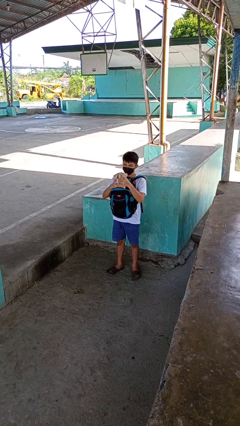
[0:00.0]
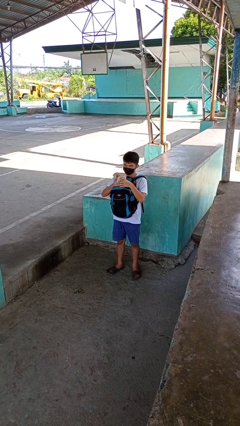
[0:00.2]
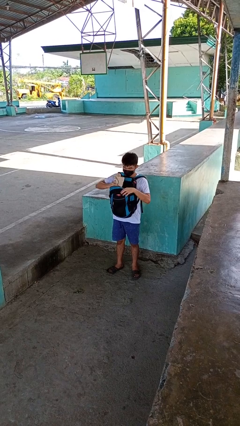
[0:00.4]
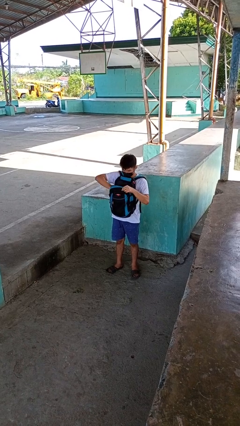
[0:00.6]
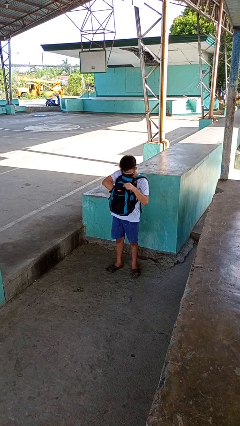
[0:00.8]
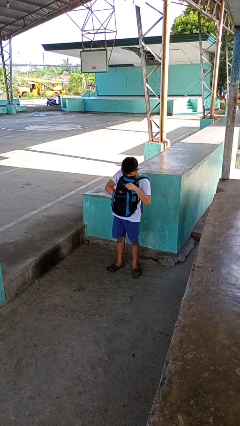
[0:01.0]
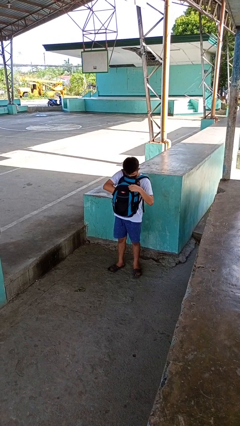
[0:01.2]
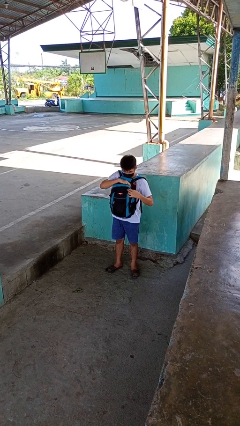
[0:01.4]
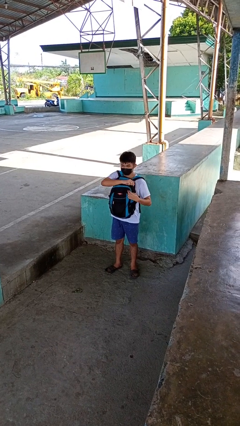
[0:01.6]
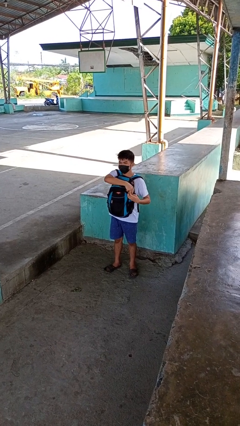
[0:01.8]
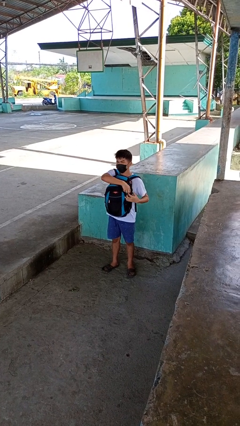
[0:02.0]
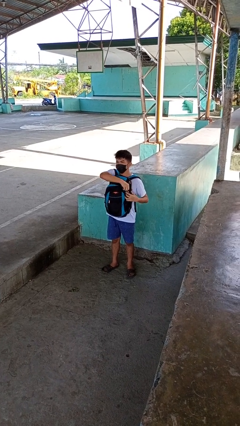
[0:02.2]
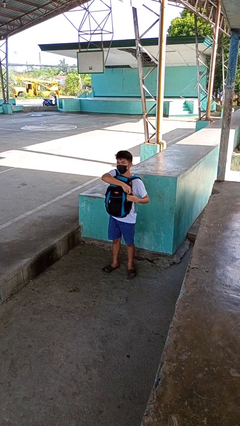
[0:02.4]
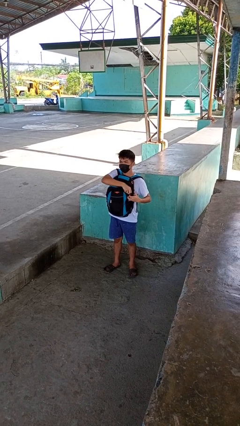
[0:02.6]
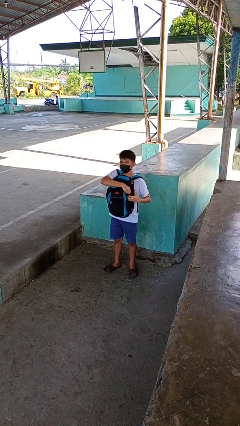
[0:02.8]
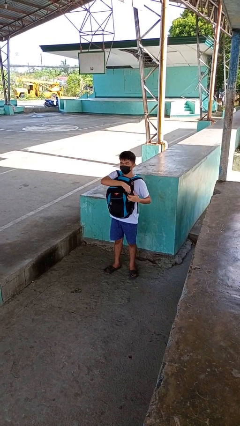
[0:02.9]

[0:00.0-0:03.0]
person puts object into backpack

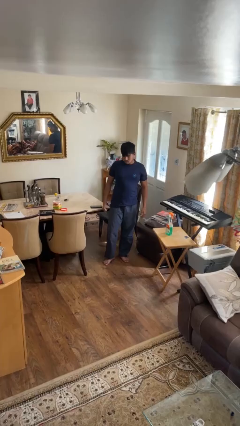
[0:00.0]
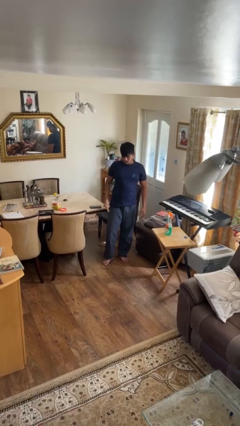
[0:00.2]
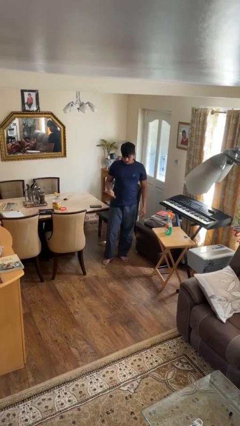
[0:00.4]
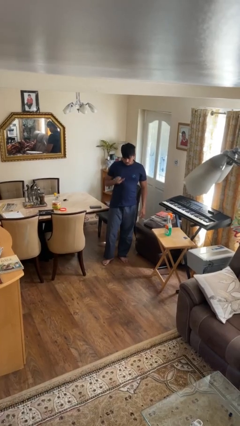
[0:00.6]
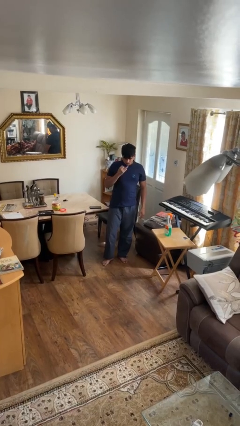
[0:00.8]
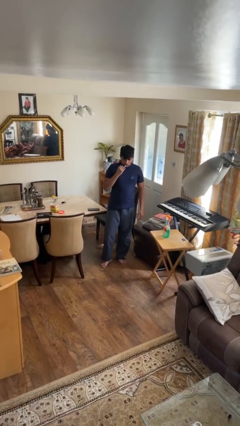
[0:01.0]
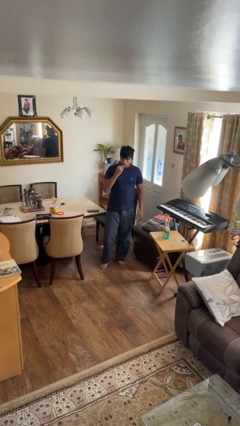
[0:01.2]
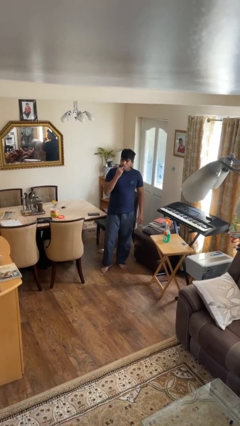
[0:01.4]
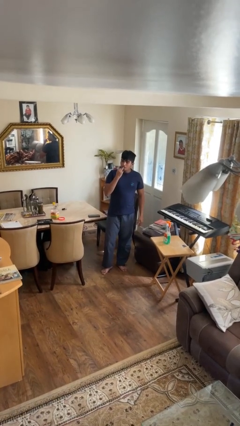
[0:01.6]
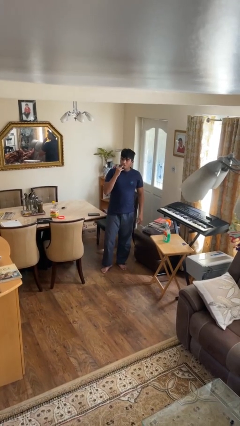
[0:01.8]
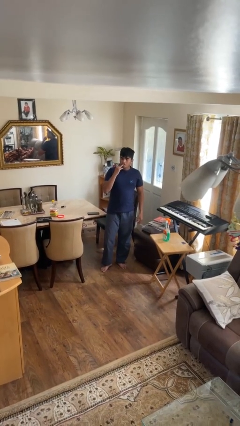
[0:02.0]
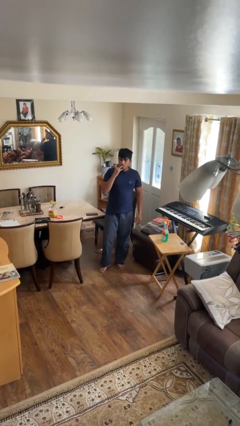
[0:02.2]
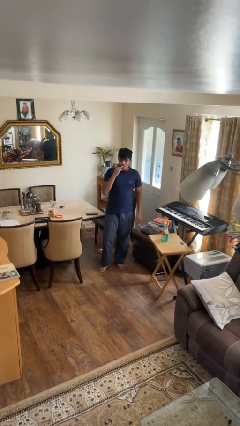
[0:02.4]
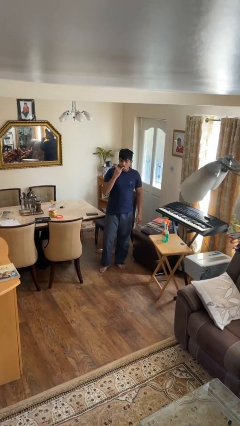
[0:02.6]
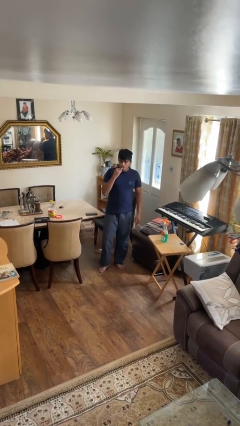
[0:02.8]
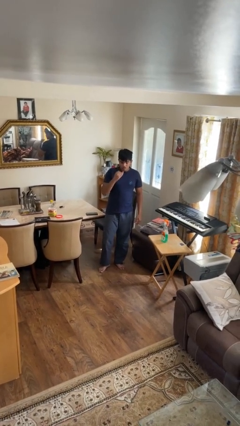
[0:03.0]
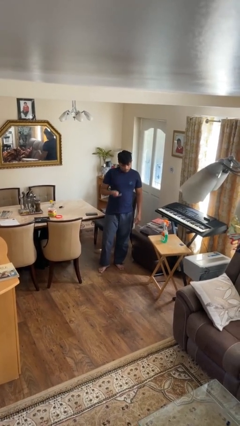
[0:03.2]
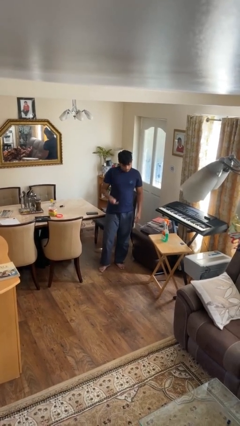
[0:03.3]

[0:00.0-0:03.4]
person licks fingers

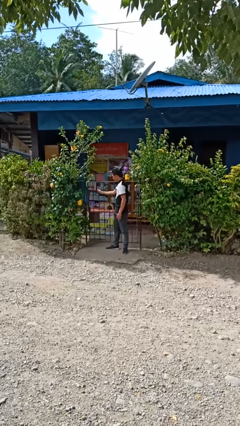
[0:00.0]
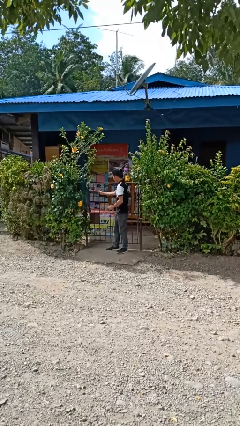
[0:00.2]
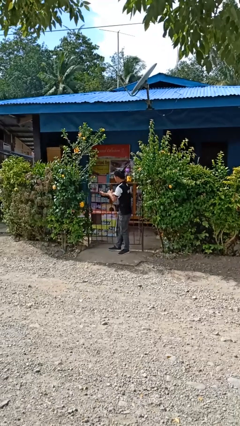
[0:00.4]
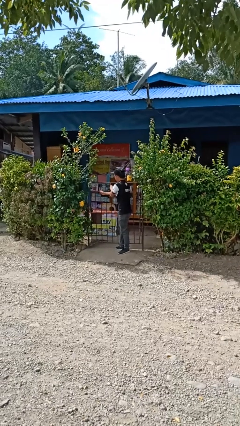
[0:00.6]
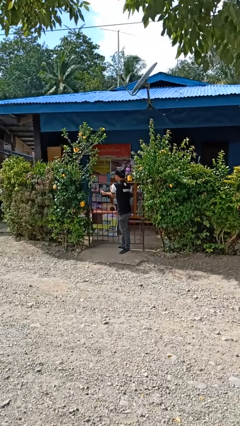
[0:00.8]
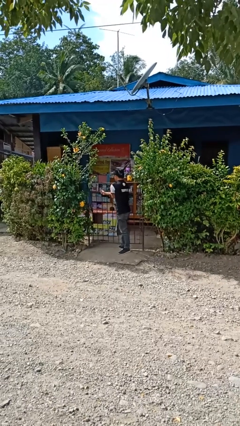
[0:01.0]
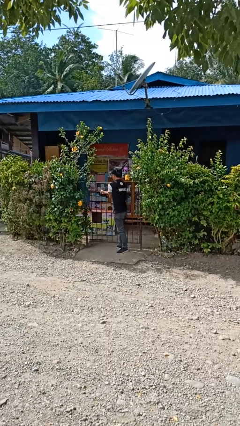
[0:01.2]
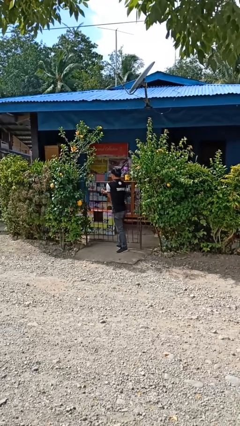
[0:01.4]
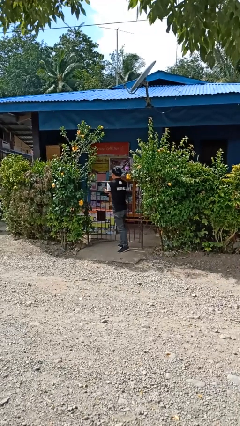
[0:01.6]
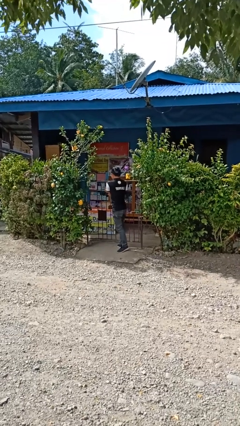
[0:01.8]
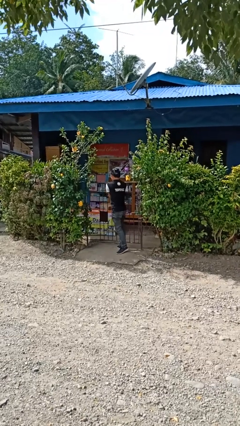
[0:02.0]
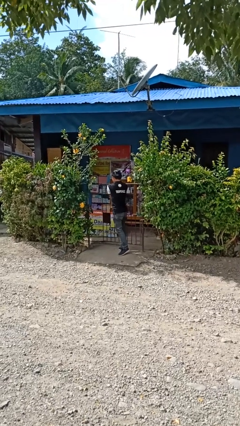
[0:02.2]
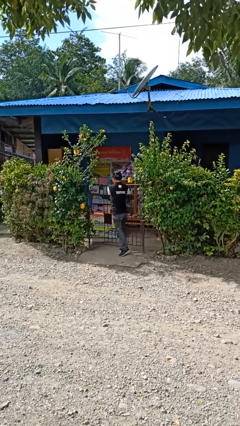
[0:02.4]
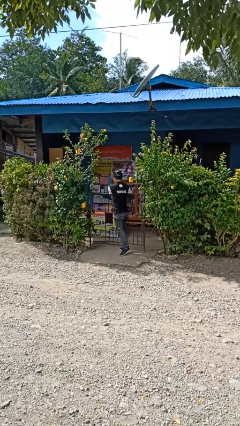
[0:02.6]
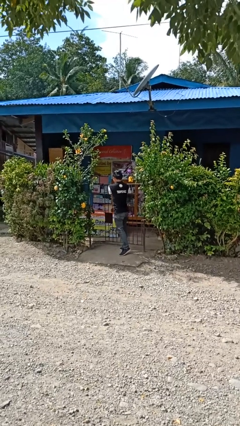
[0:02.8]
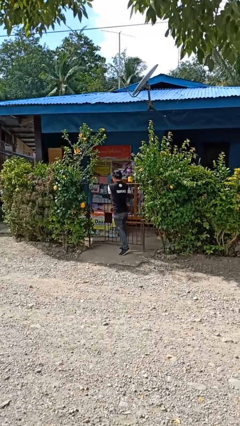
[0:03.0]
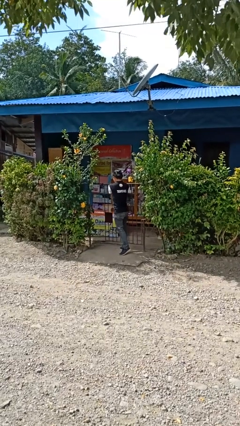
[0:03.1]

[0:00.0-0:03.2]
person opens gate

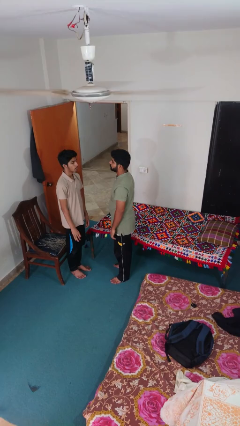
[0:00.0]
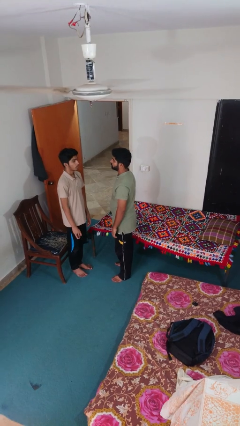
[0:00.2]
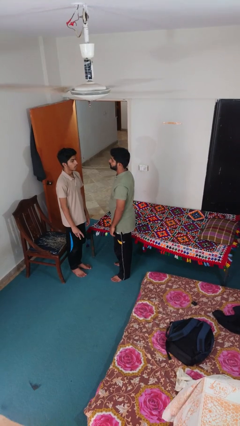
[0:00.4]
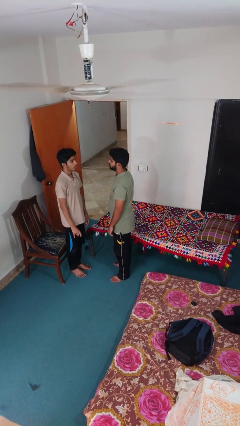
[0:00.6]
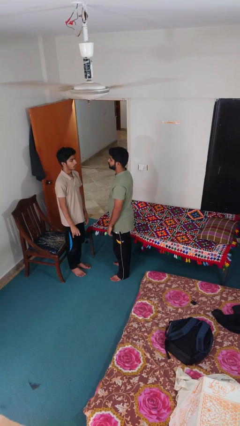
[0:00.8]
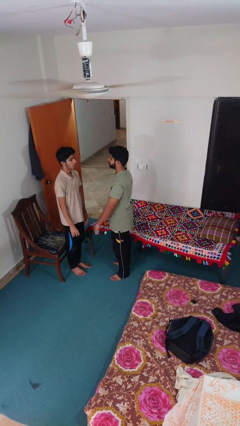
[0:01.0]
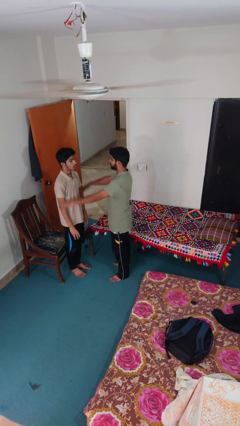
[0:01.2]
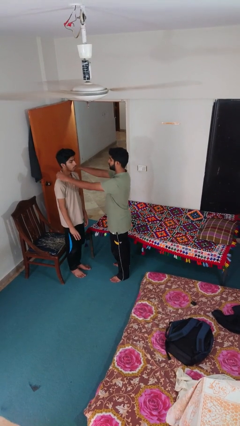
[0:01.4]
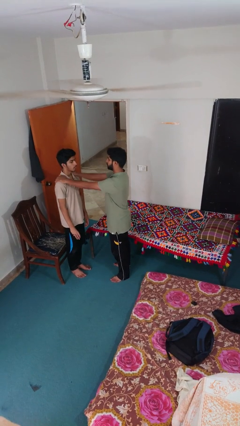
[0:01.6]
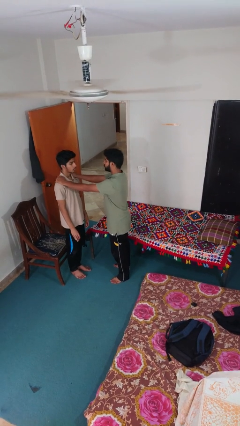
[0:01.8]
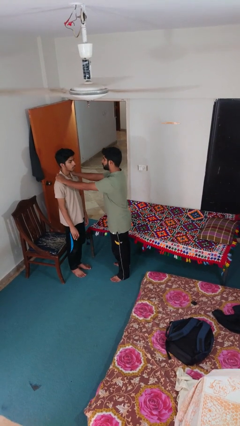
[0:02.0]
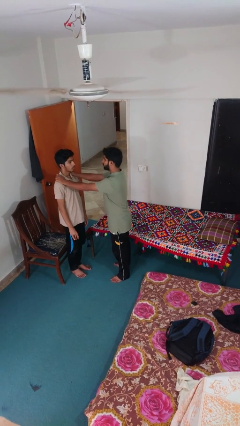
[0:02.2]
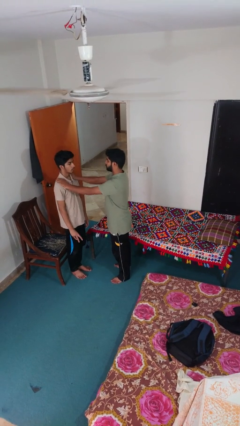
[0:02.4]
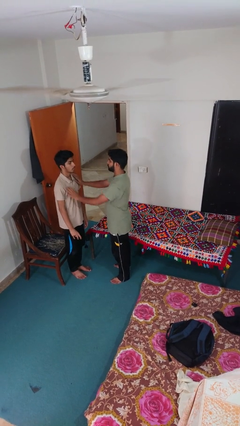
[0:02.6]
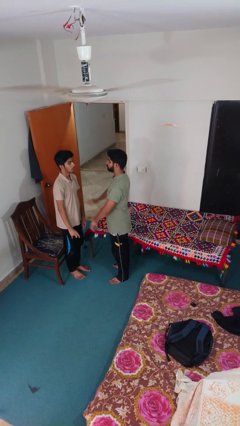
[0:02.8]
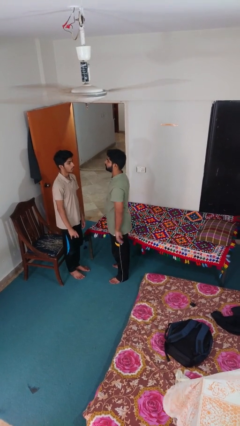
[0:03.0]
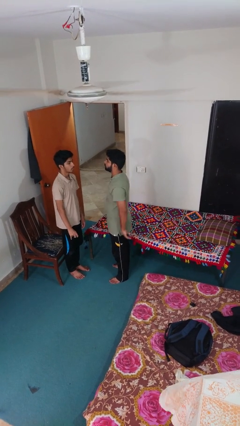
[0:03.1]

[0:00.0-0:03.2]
person pounds shoulders of person

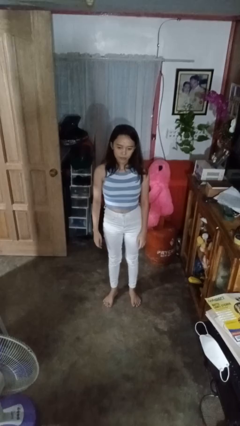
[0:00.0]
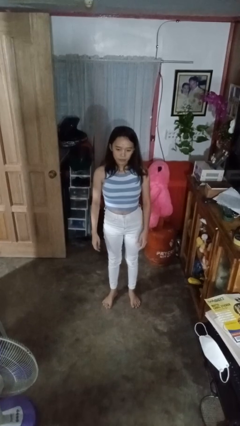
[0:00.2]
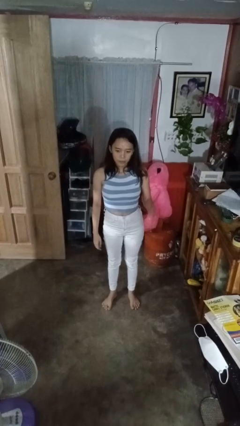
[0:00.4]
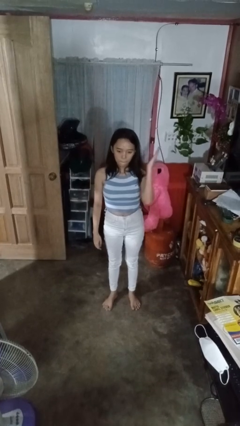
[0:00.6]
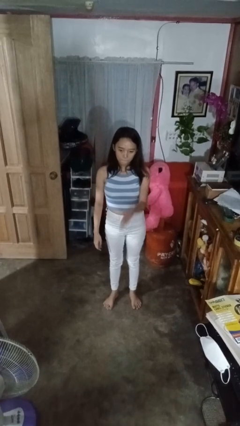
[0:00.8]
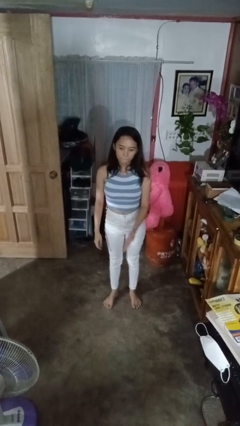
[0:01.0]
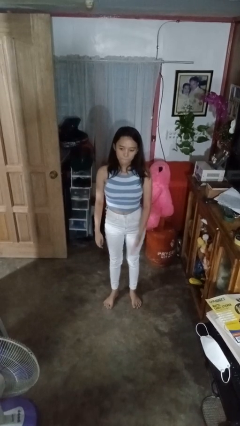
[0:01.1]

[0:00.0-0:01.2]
person karate chop

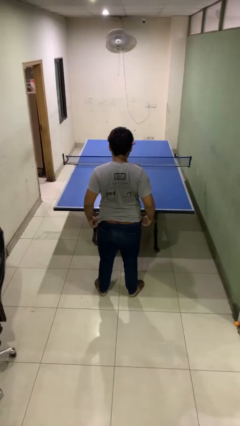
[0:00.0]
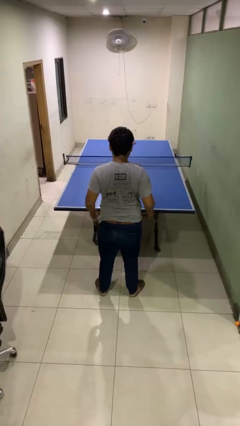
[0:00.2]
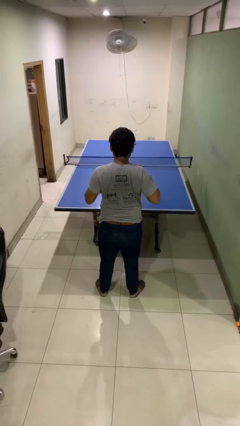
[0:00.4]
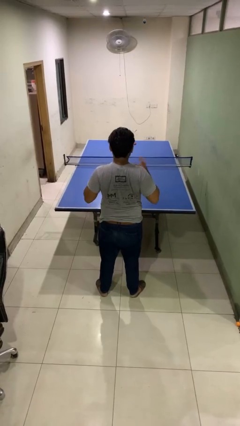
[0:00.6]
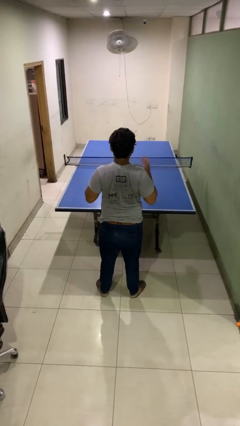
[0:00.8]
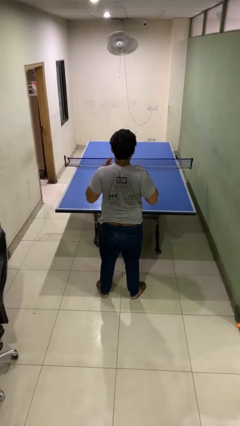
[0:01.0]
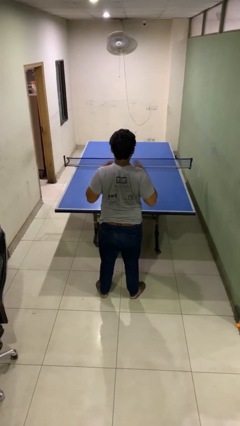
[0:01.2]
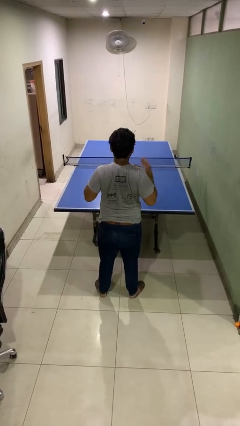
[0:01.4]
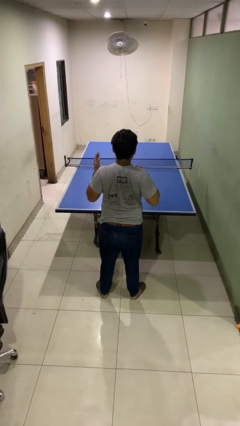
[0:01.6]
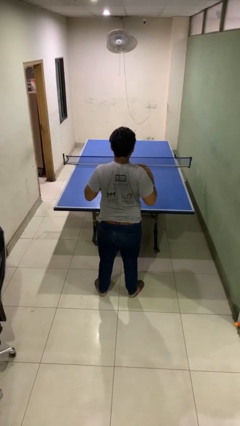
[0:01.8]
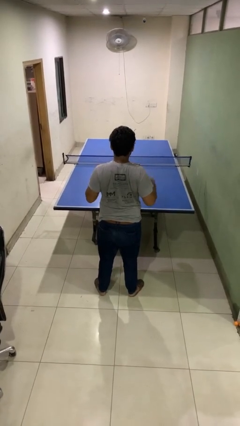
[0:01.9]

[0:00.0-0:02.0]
person drums on chest

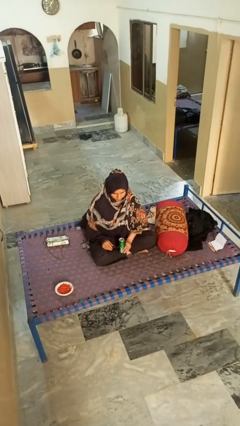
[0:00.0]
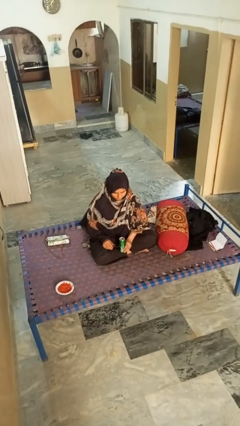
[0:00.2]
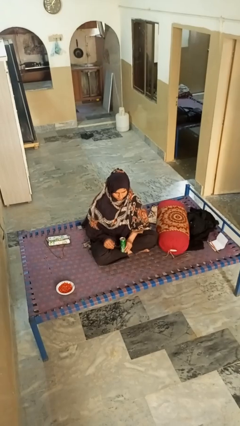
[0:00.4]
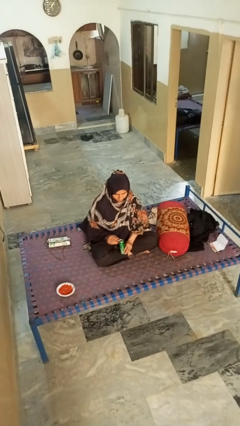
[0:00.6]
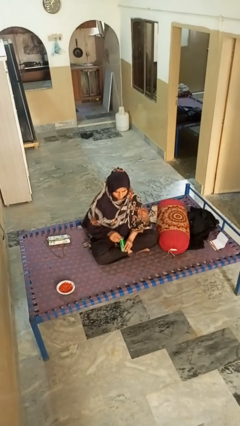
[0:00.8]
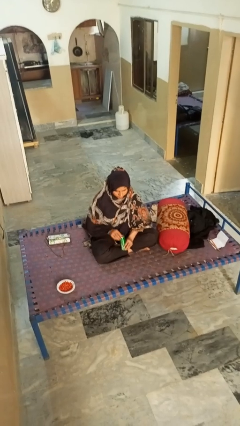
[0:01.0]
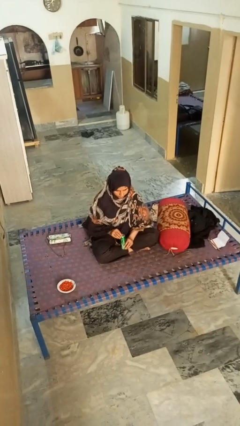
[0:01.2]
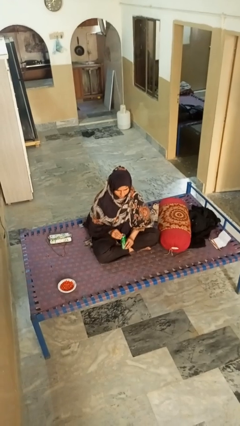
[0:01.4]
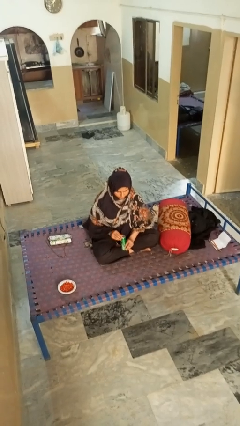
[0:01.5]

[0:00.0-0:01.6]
person opens can with can opener
